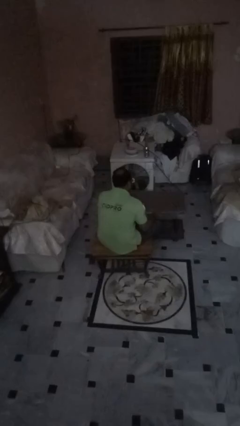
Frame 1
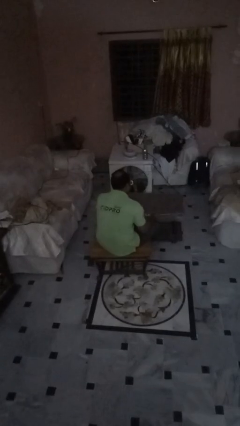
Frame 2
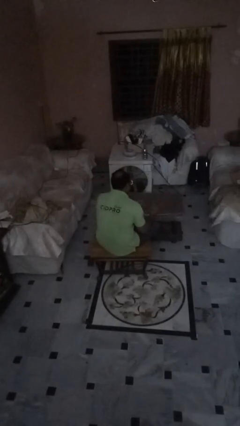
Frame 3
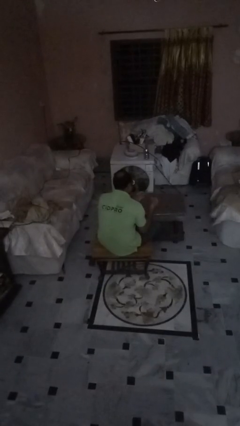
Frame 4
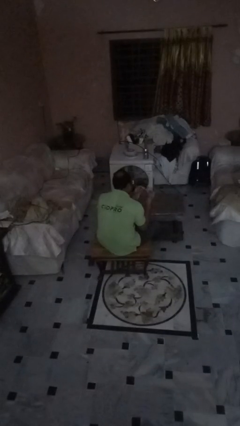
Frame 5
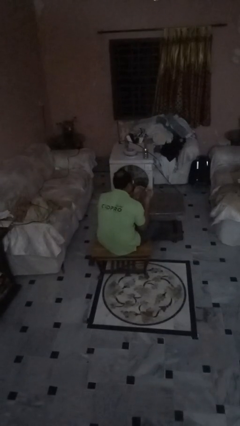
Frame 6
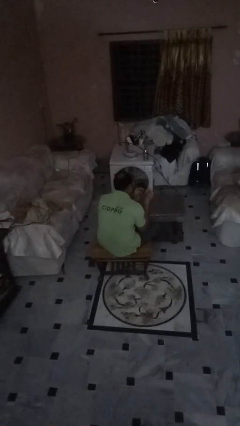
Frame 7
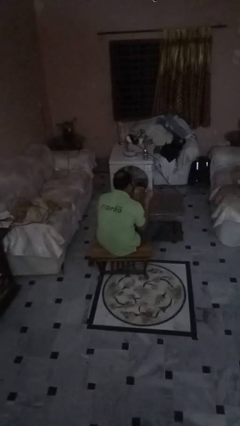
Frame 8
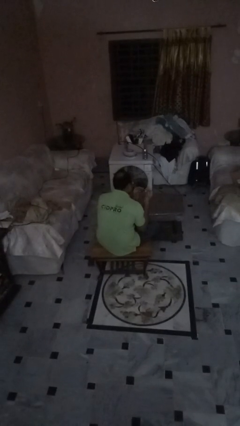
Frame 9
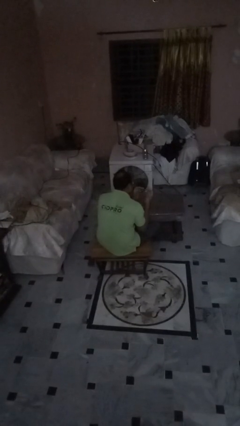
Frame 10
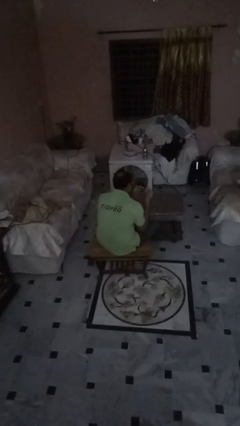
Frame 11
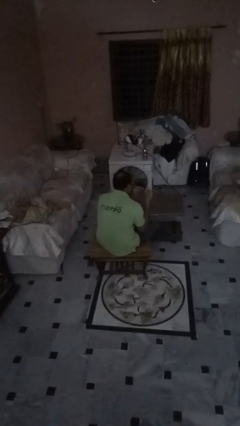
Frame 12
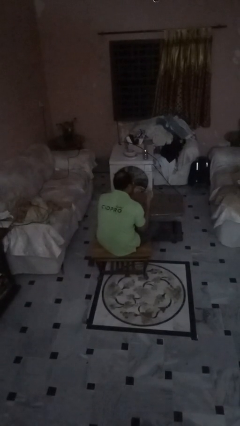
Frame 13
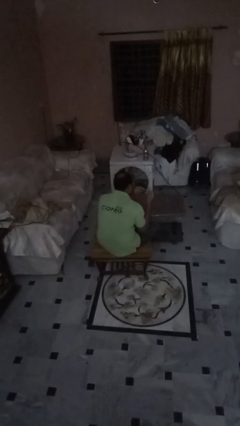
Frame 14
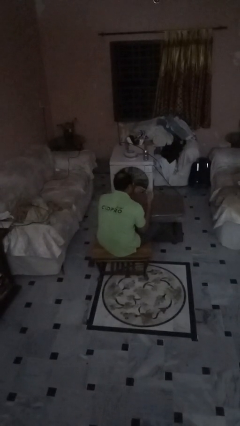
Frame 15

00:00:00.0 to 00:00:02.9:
person clips fingernails

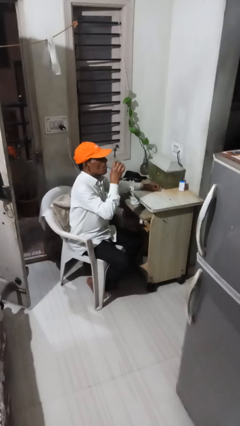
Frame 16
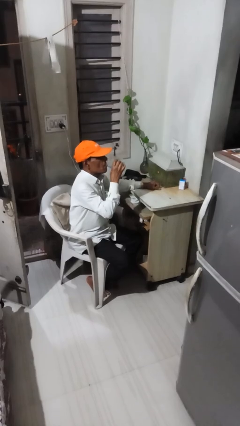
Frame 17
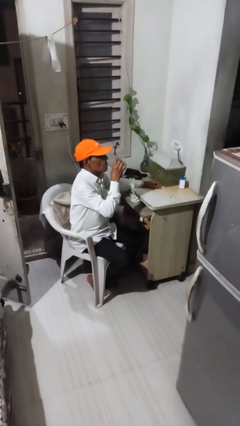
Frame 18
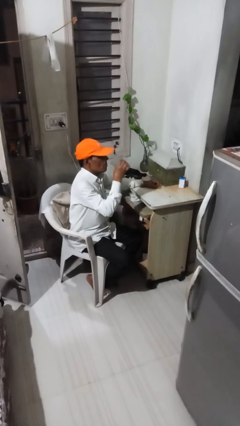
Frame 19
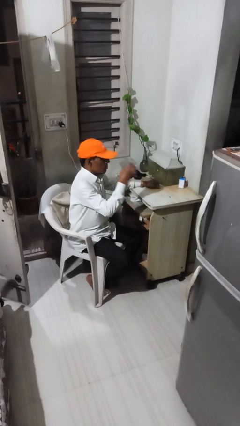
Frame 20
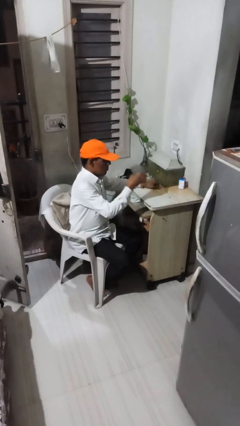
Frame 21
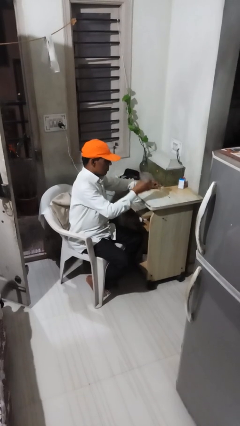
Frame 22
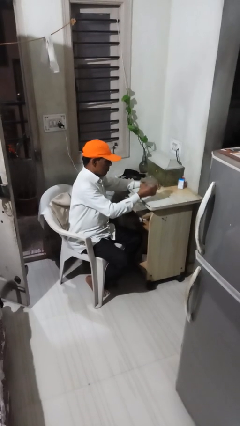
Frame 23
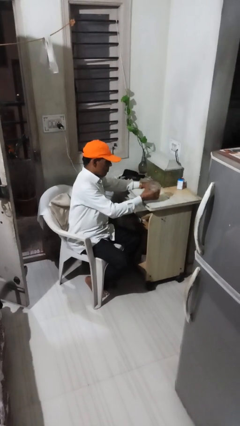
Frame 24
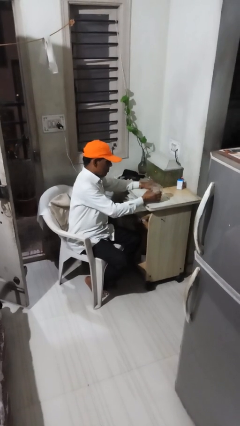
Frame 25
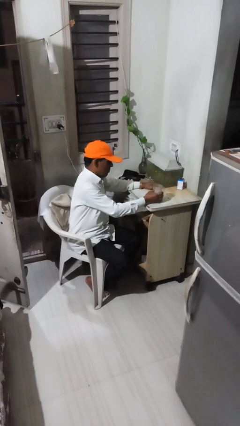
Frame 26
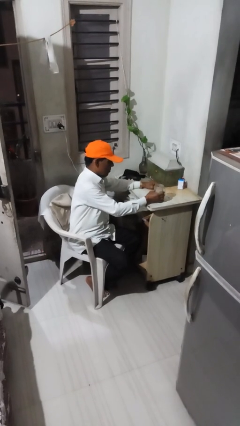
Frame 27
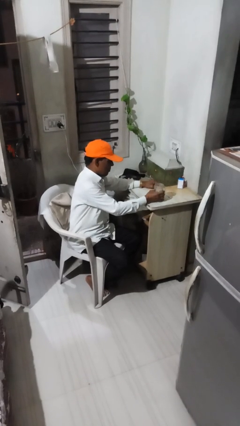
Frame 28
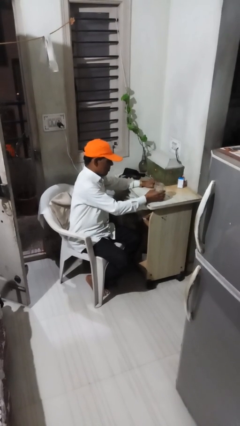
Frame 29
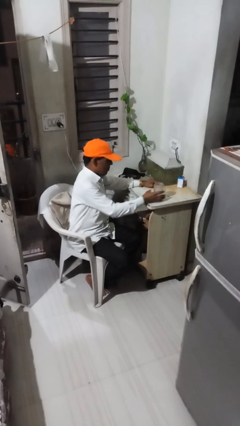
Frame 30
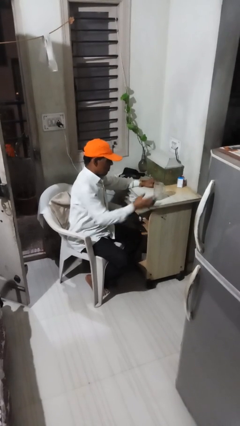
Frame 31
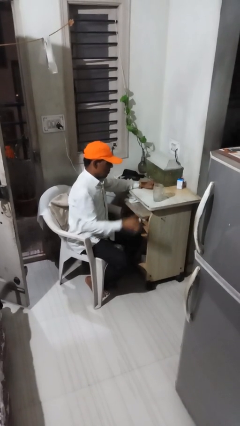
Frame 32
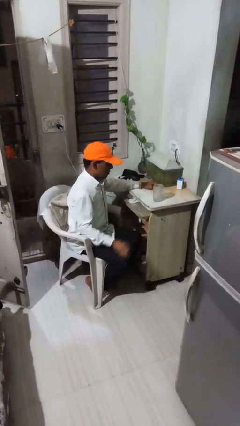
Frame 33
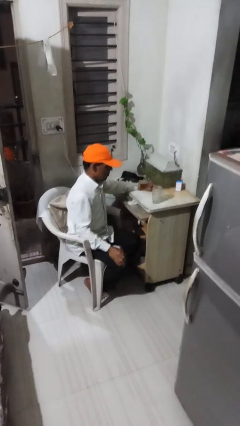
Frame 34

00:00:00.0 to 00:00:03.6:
person puts down object on table

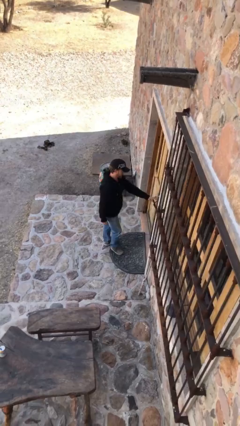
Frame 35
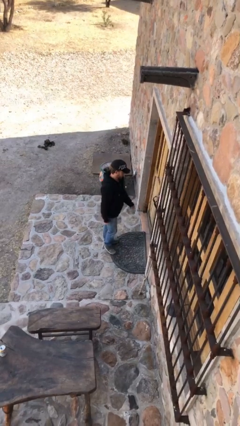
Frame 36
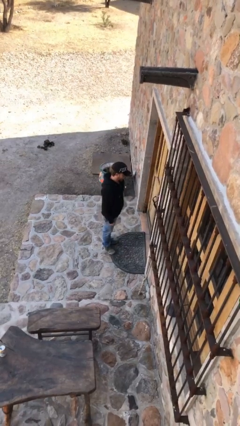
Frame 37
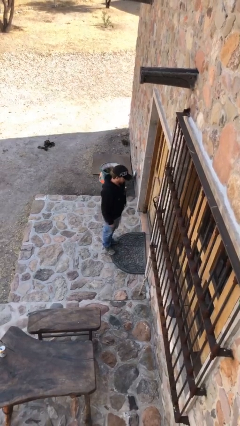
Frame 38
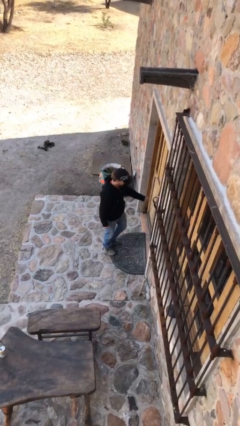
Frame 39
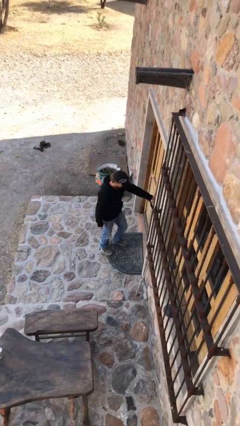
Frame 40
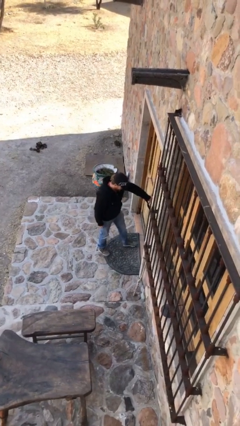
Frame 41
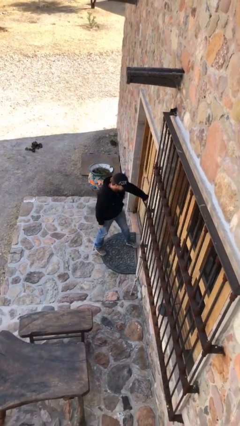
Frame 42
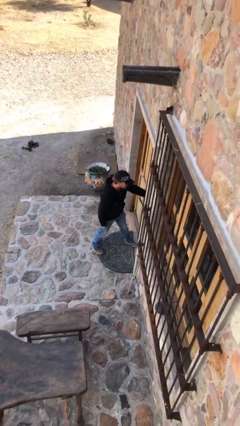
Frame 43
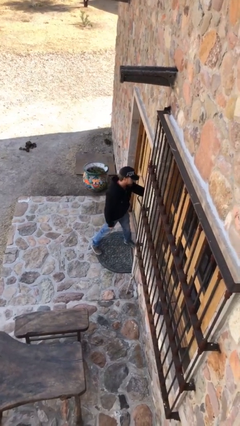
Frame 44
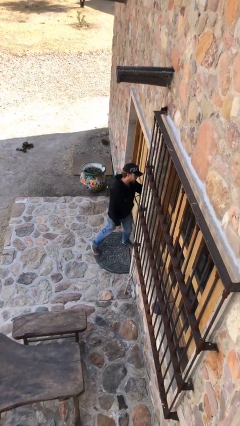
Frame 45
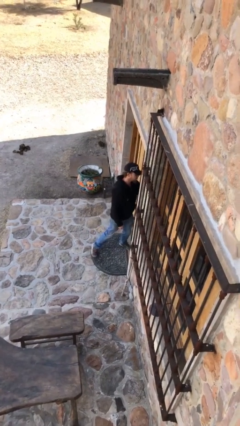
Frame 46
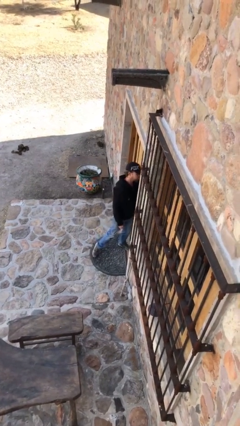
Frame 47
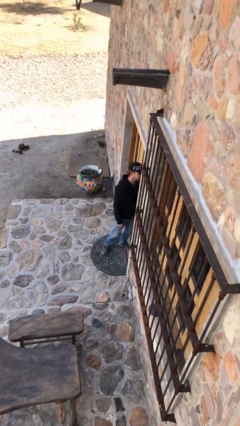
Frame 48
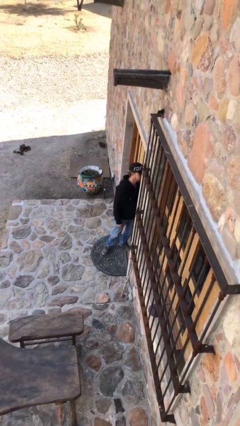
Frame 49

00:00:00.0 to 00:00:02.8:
person opens facility door

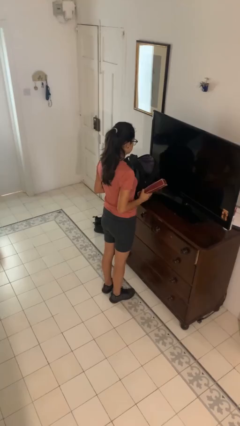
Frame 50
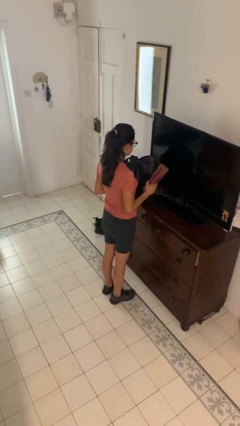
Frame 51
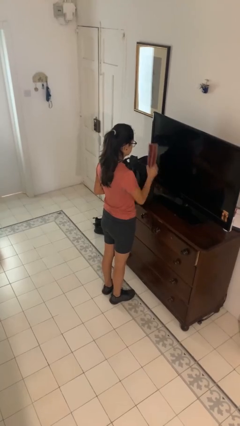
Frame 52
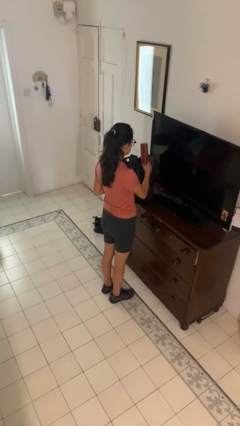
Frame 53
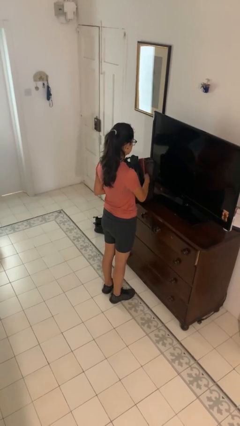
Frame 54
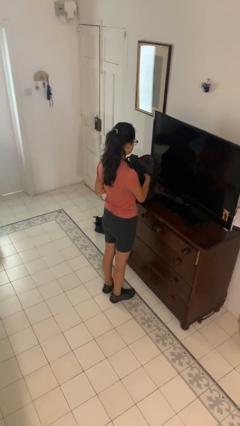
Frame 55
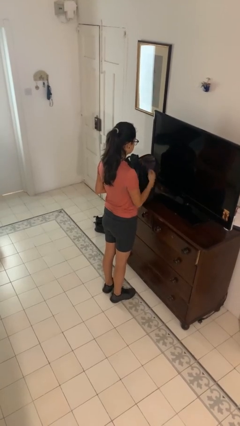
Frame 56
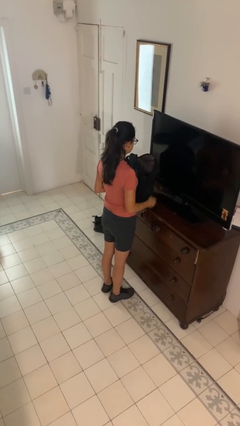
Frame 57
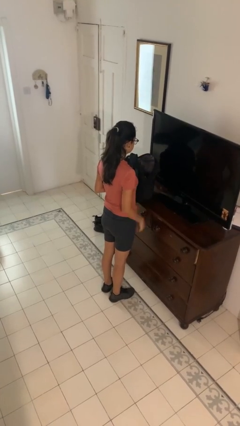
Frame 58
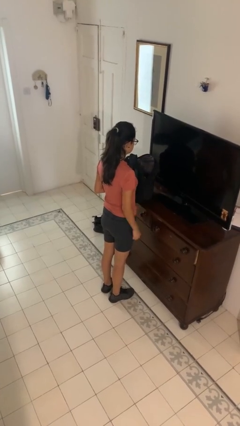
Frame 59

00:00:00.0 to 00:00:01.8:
person puts object into bag

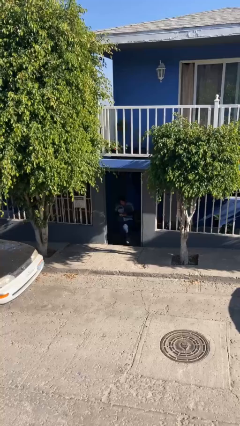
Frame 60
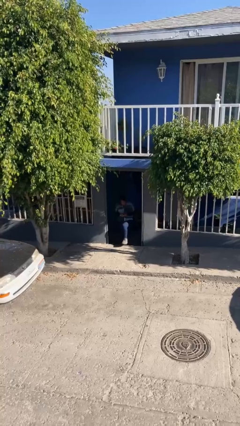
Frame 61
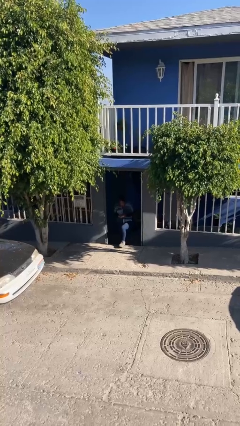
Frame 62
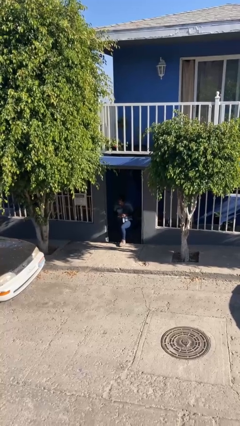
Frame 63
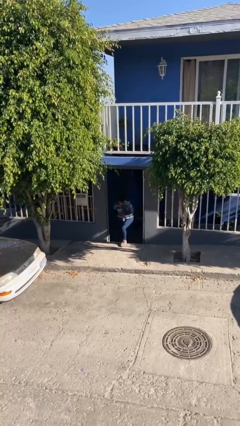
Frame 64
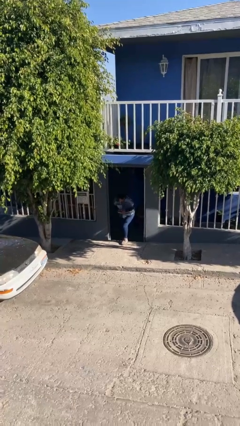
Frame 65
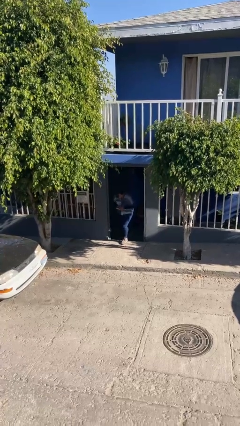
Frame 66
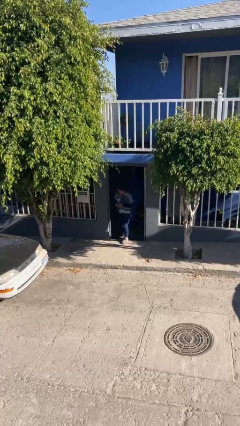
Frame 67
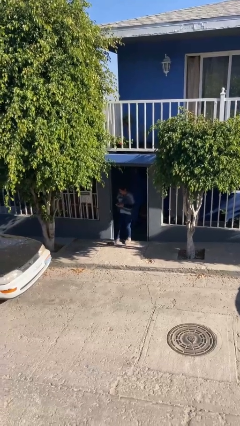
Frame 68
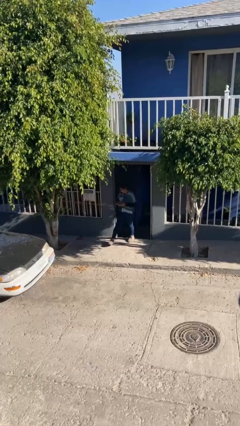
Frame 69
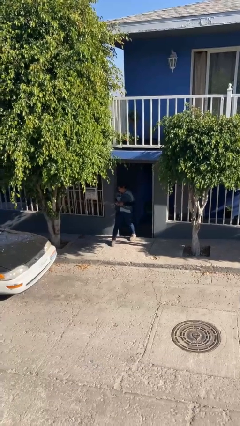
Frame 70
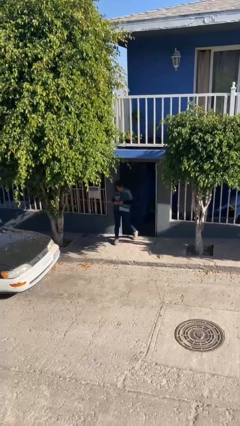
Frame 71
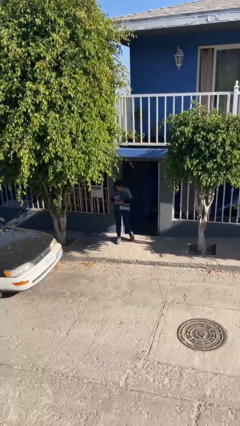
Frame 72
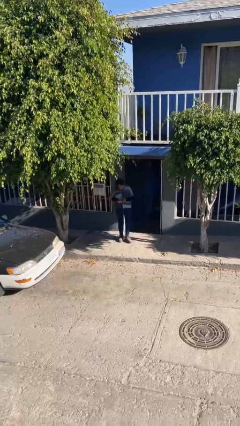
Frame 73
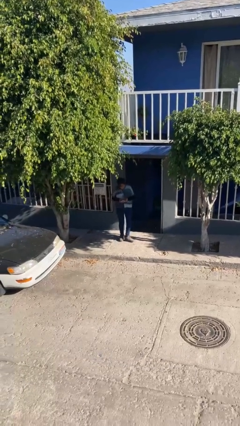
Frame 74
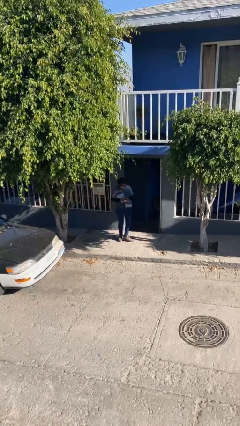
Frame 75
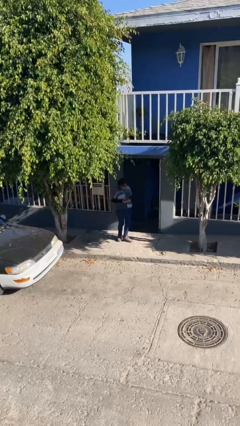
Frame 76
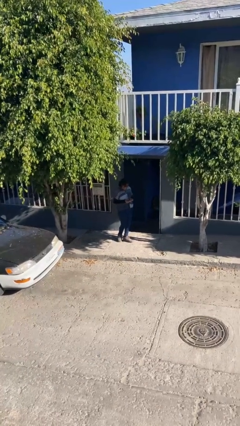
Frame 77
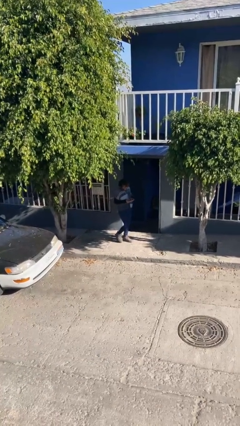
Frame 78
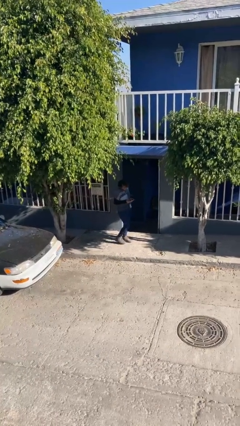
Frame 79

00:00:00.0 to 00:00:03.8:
person enters scene through structure

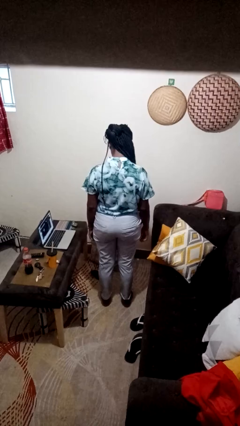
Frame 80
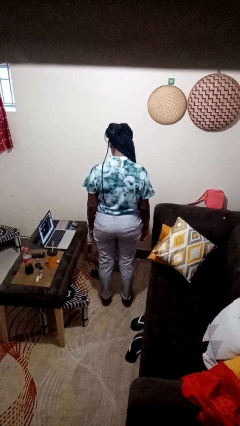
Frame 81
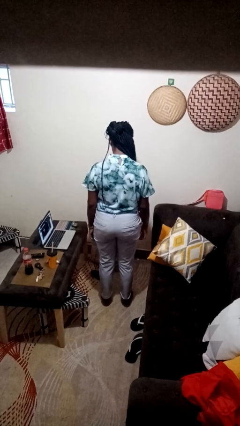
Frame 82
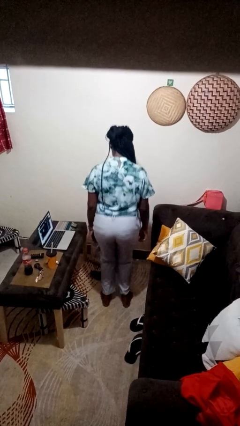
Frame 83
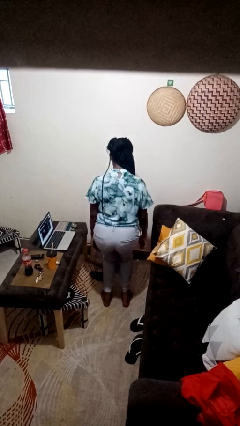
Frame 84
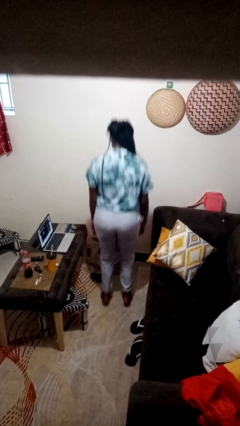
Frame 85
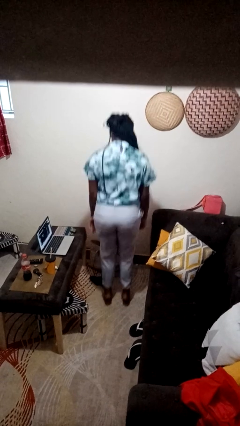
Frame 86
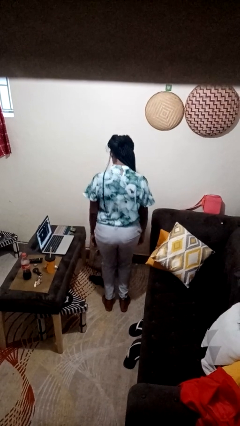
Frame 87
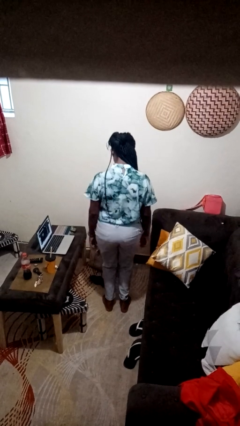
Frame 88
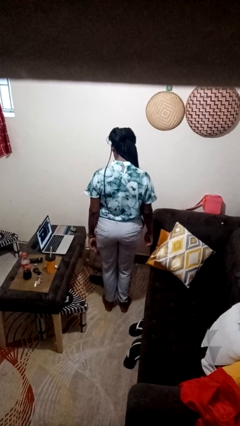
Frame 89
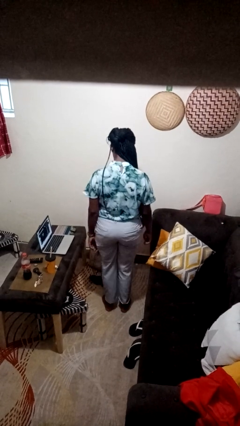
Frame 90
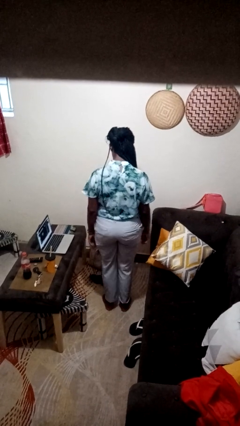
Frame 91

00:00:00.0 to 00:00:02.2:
person jumps
